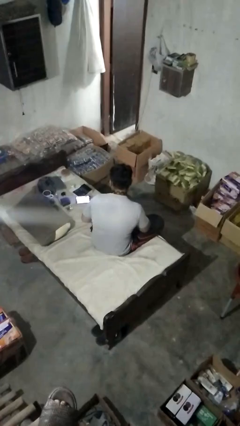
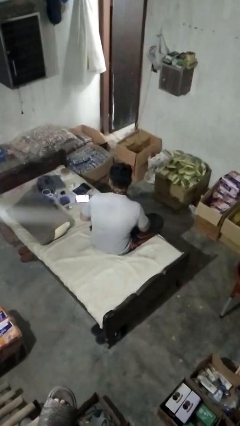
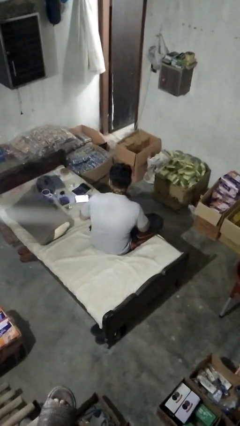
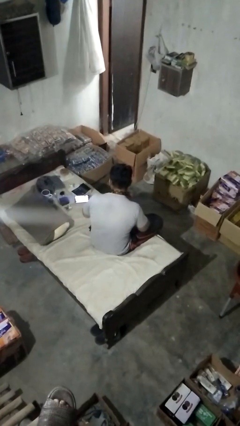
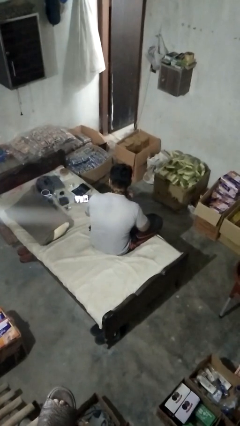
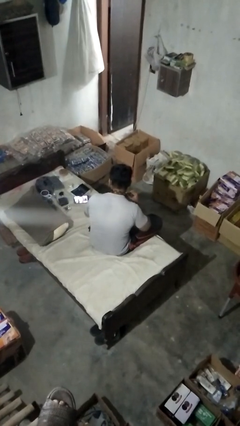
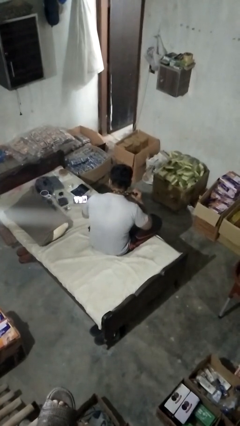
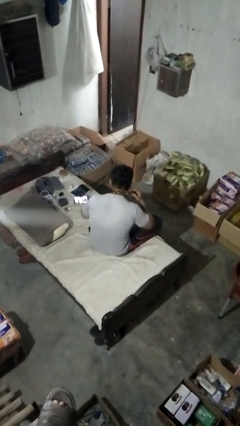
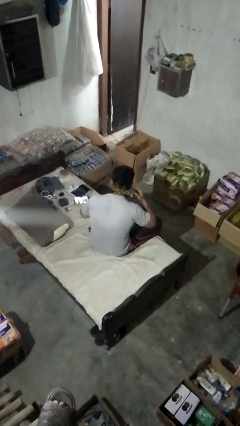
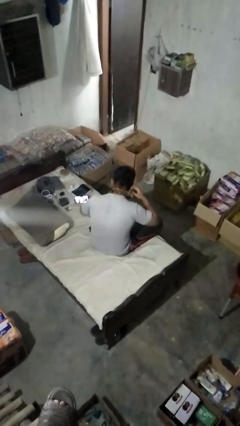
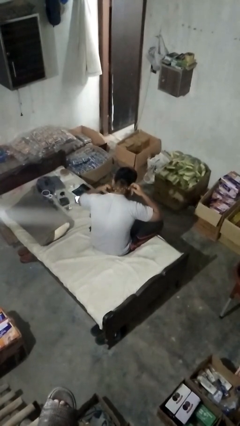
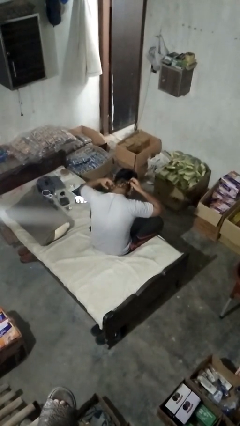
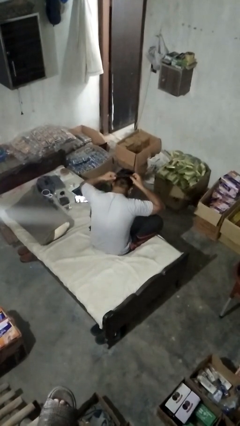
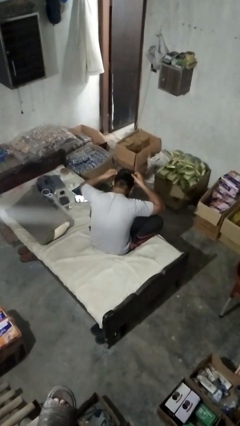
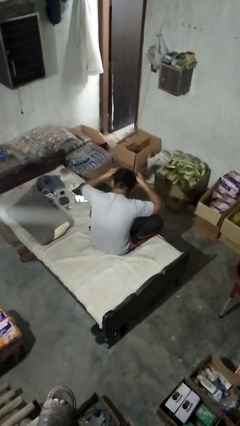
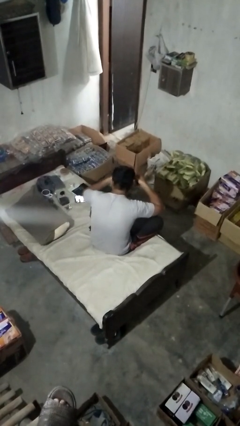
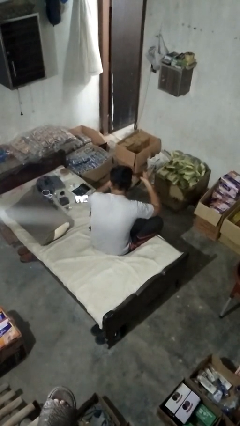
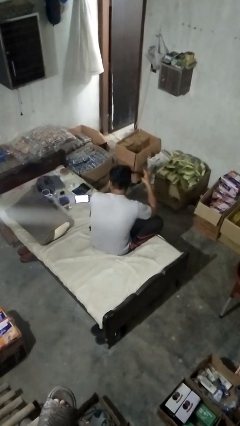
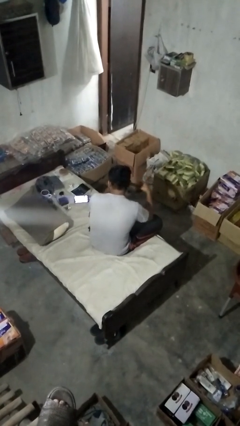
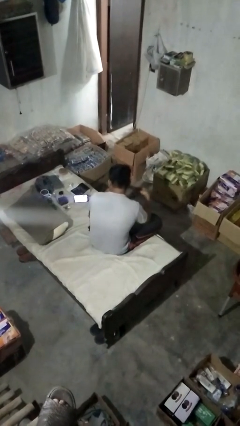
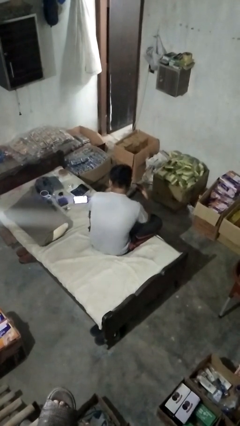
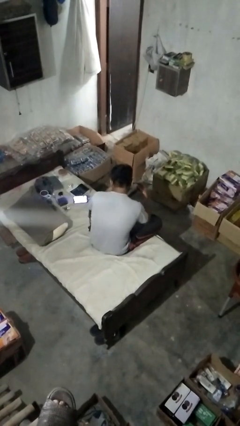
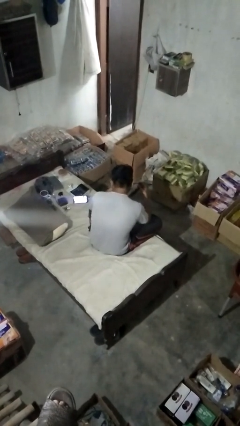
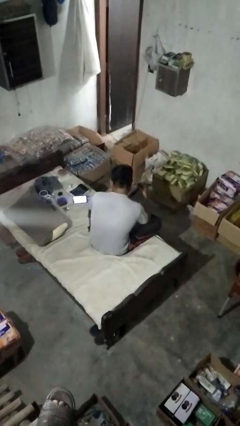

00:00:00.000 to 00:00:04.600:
person takes off necktie

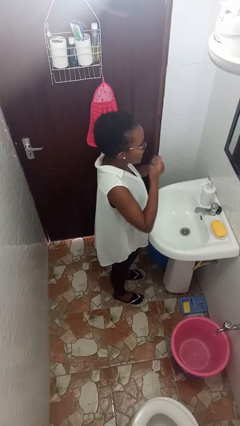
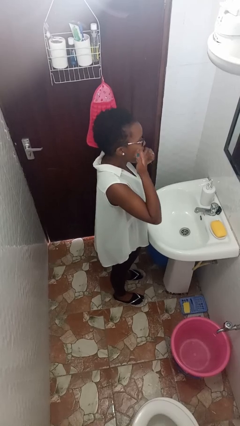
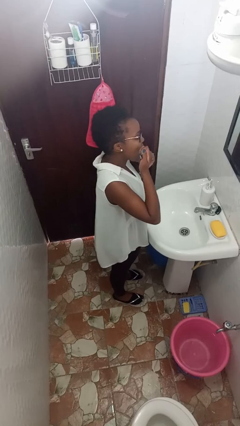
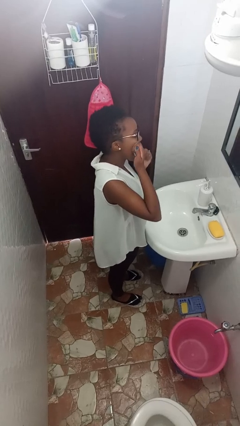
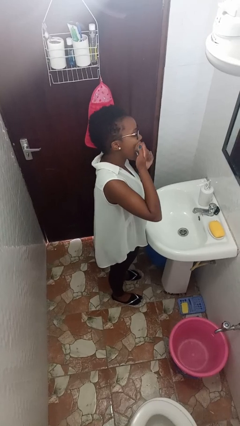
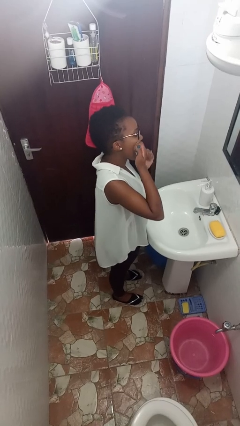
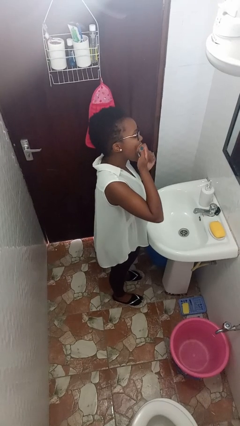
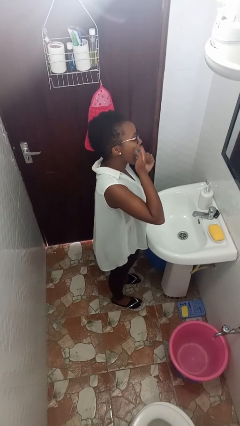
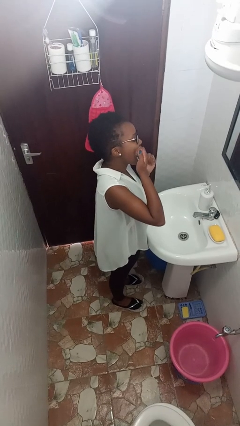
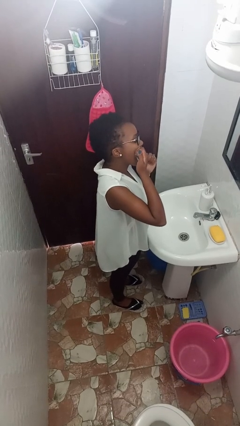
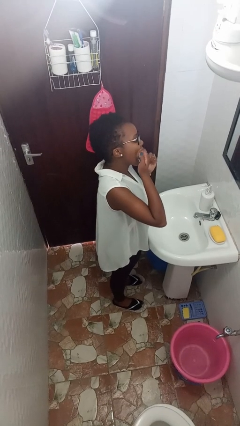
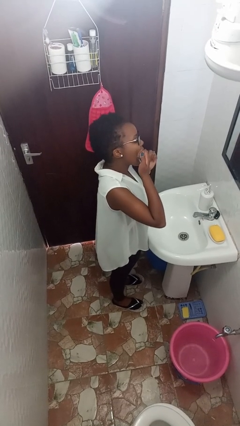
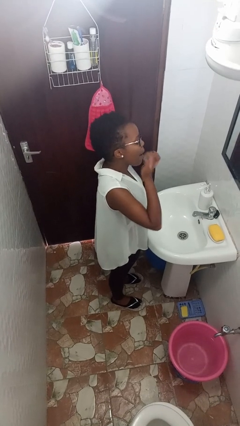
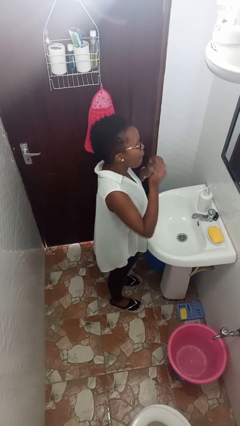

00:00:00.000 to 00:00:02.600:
person flosses

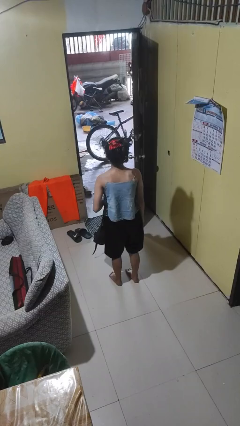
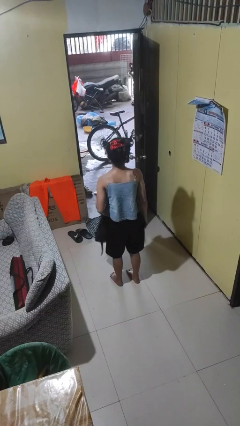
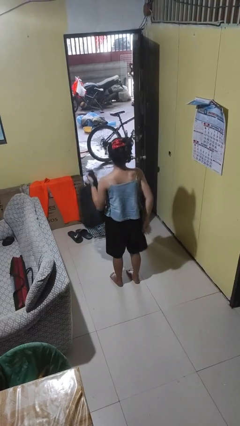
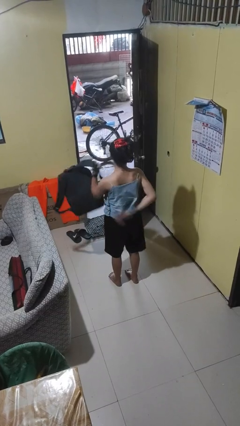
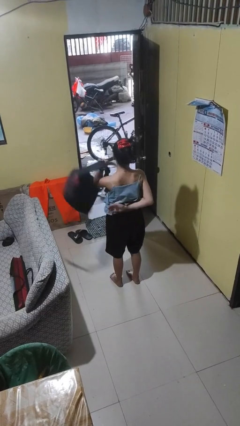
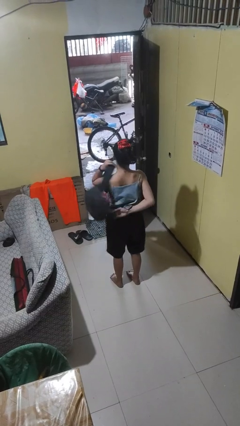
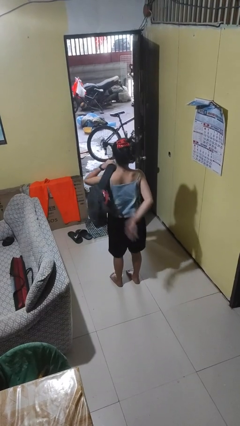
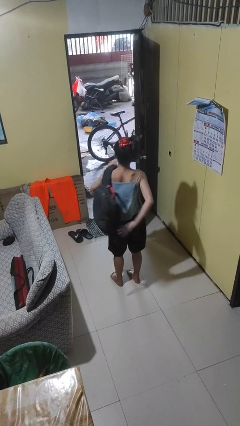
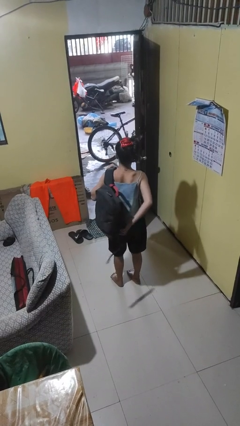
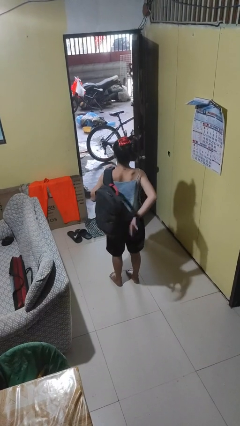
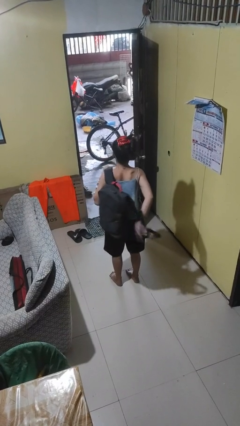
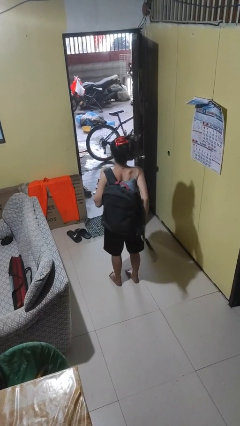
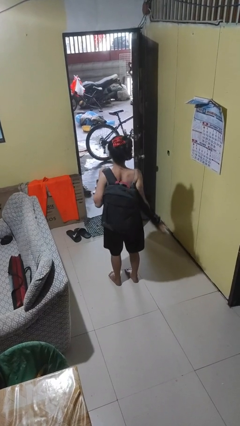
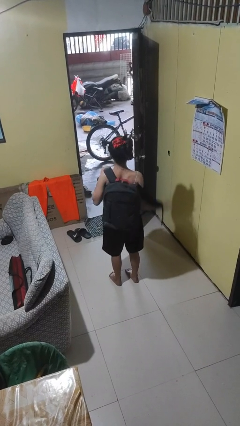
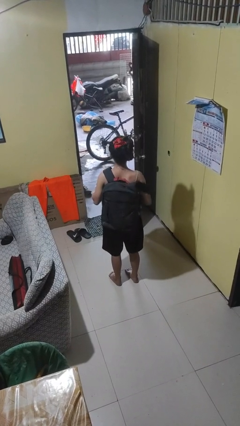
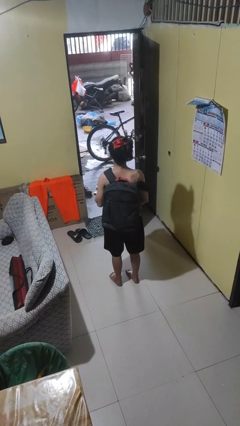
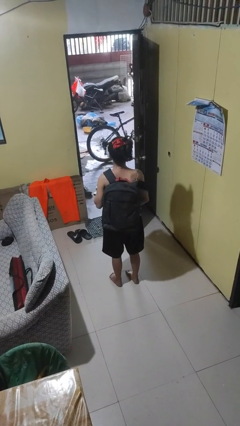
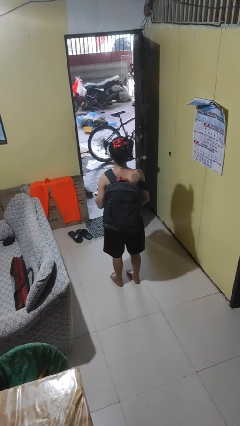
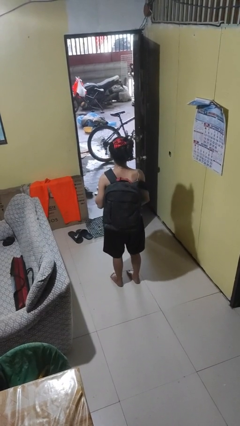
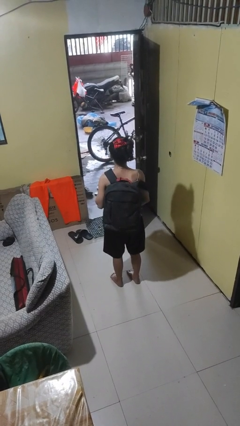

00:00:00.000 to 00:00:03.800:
person puts on backpack

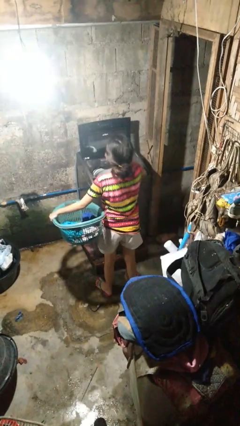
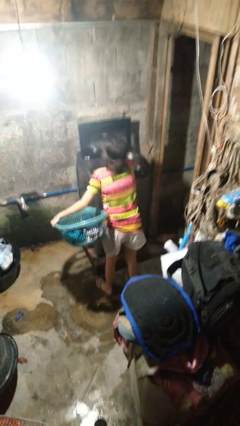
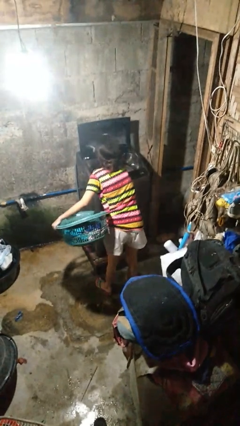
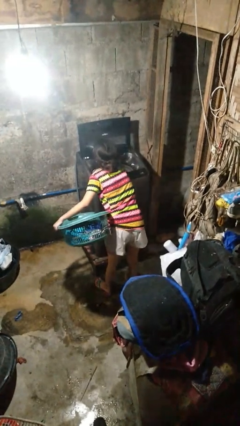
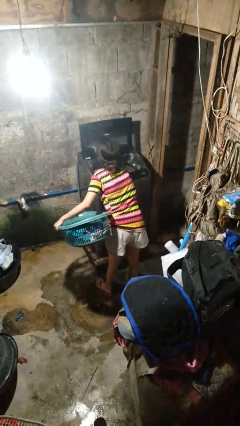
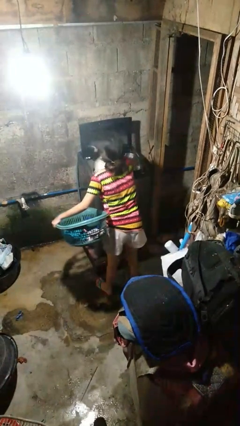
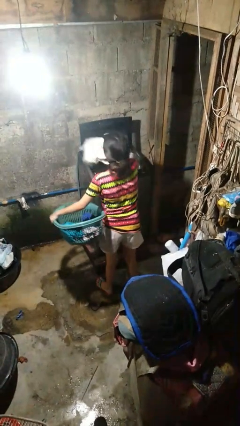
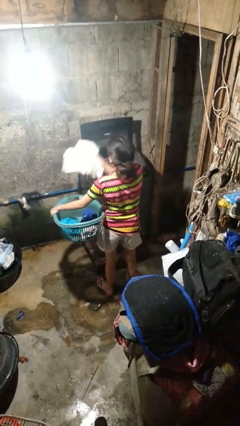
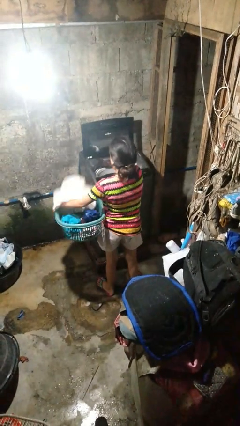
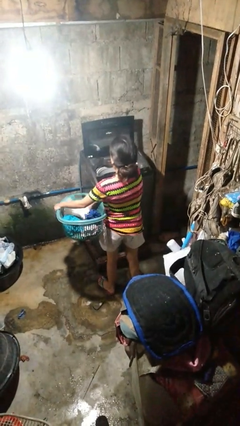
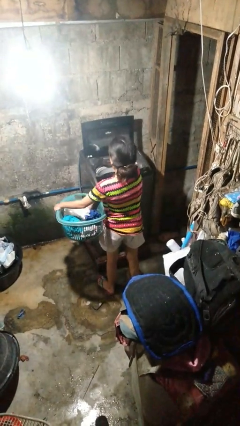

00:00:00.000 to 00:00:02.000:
person unloads clotheswasher

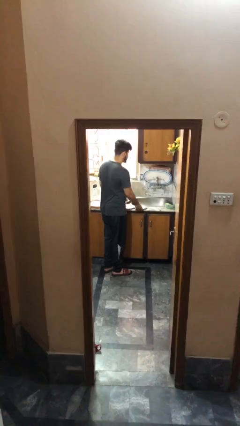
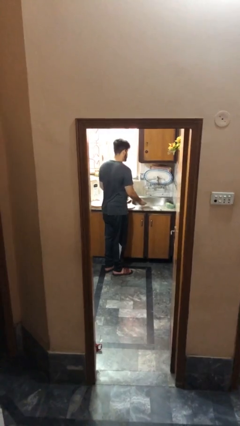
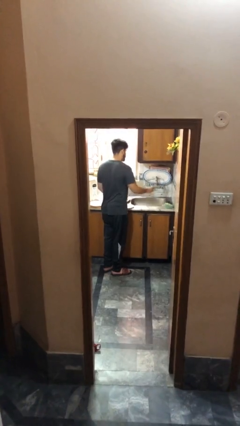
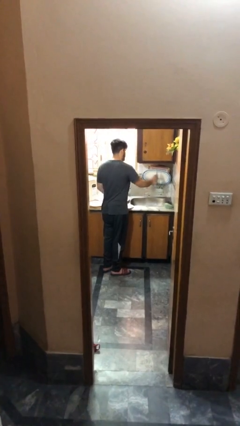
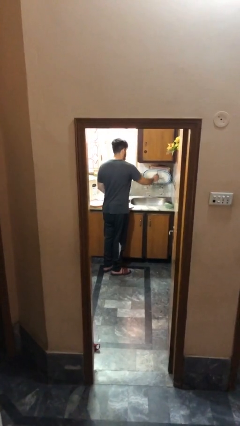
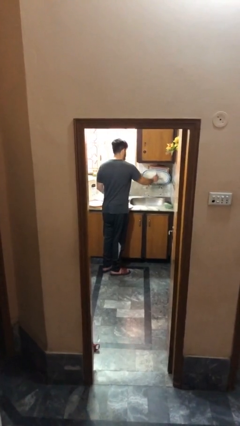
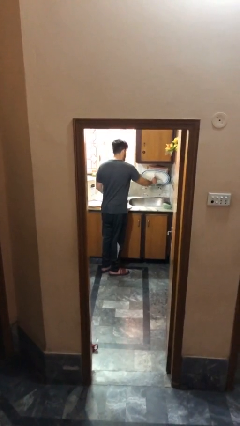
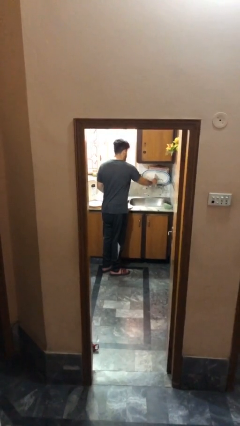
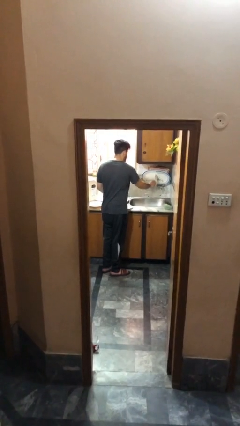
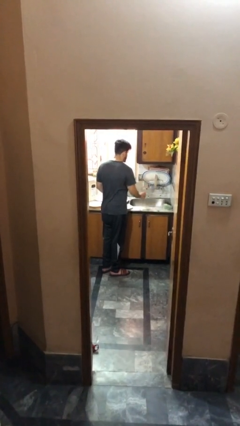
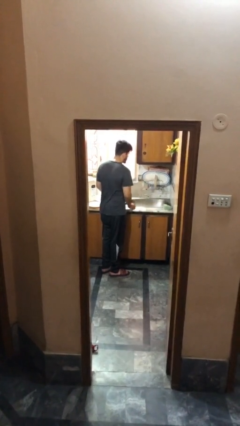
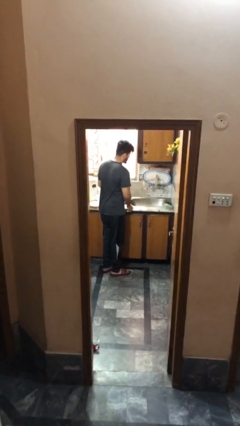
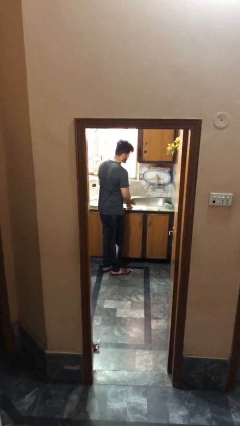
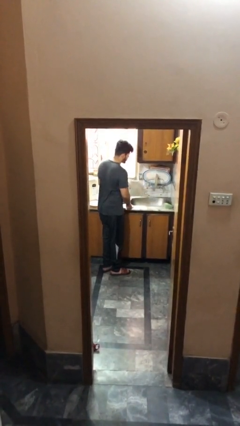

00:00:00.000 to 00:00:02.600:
person loads dishwasher

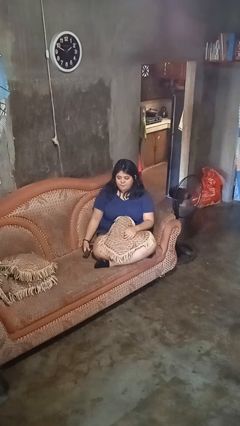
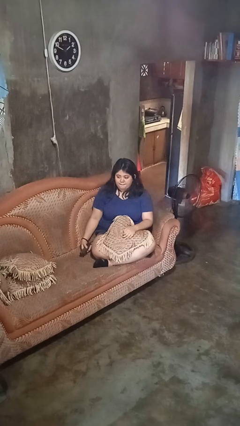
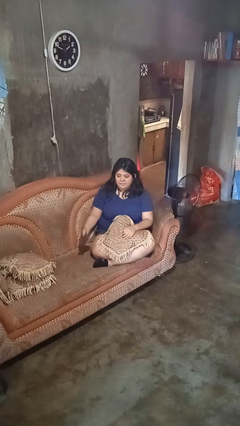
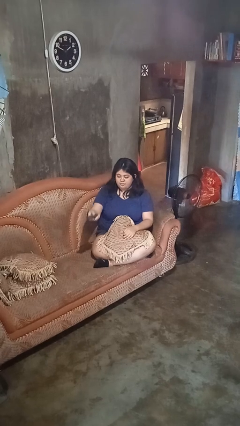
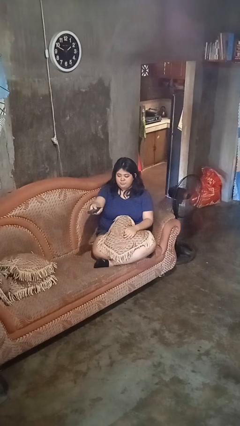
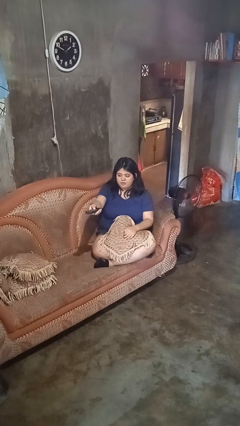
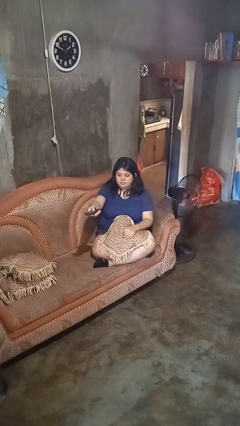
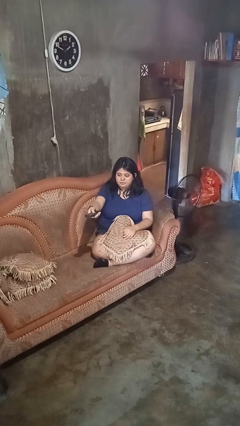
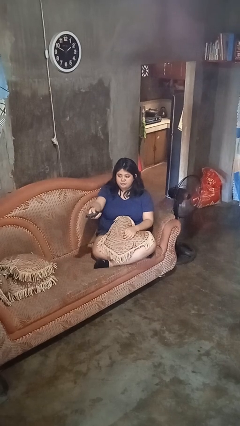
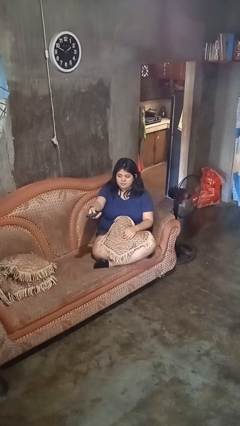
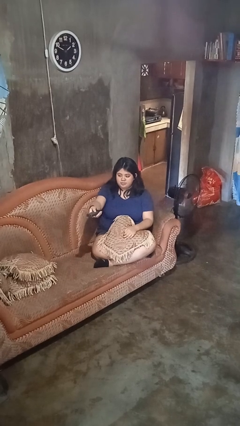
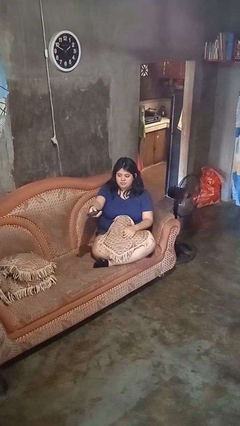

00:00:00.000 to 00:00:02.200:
person uses television remote
